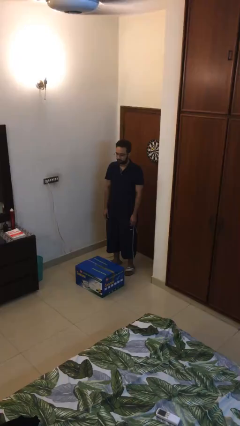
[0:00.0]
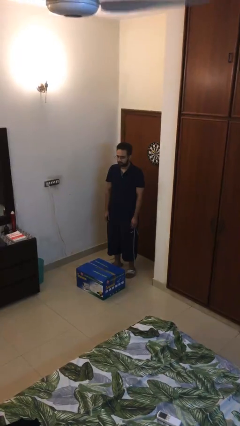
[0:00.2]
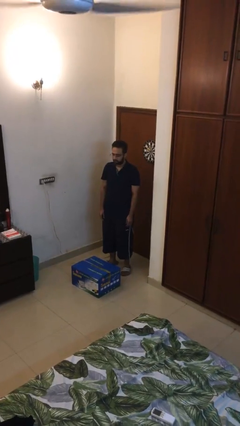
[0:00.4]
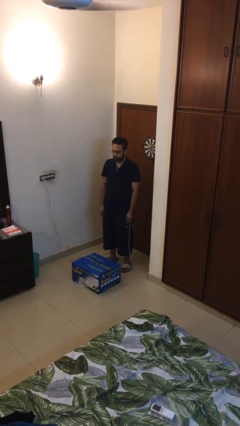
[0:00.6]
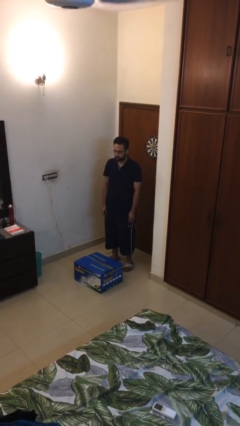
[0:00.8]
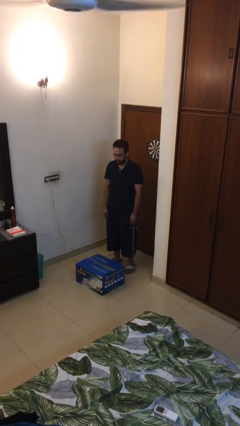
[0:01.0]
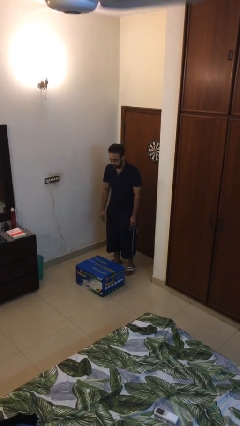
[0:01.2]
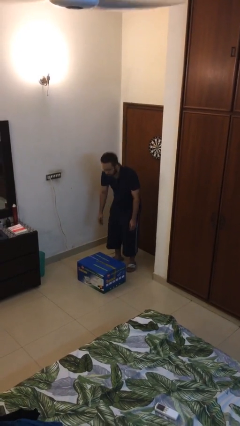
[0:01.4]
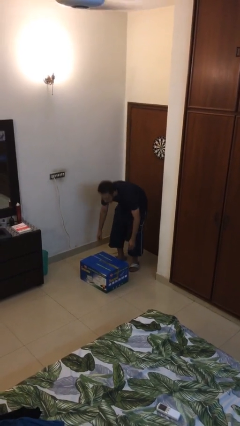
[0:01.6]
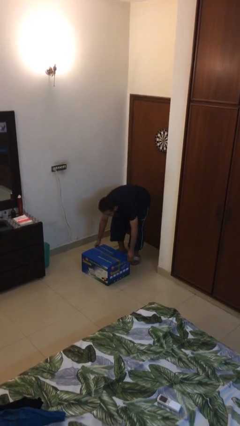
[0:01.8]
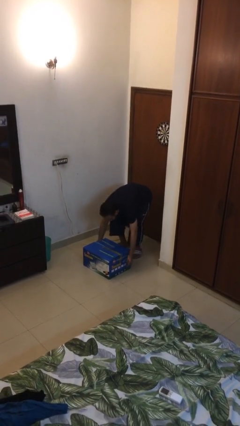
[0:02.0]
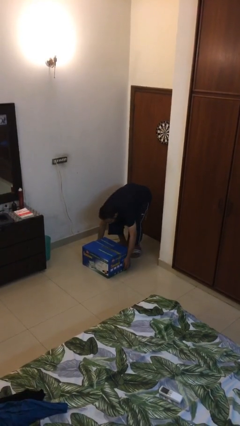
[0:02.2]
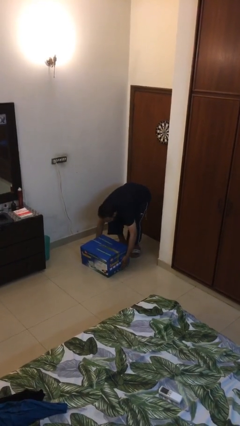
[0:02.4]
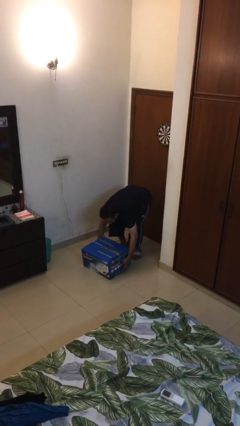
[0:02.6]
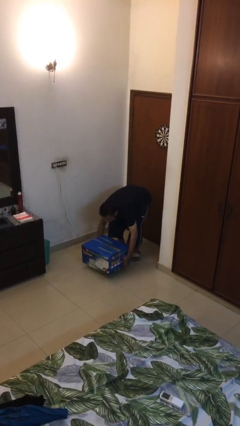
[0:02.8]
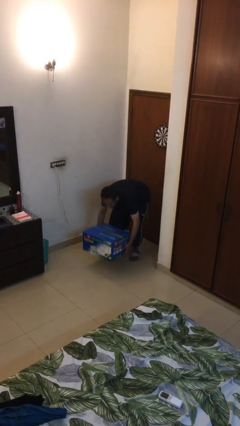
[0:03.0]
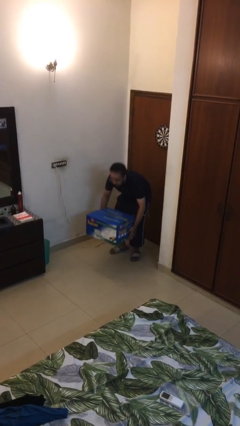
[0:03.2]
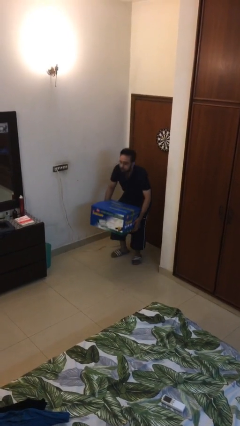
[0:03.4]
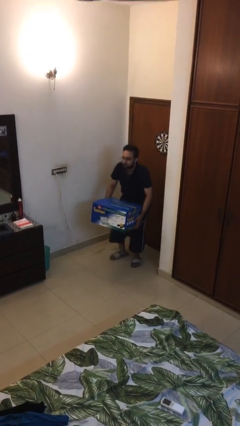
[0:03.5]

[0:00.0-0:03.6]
person picks up object from floor

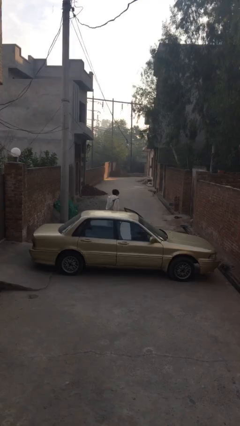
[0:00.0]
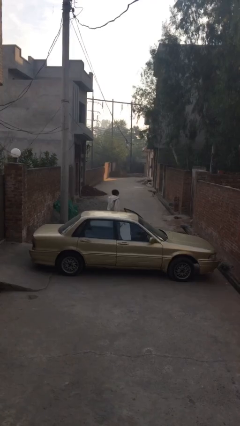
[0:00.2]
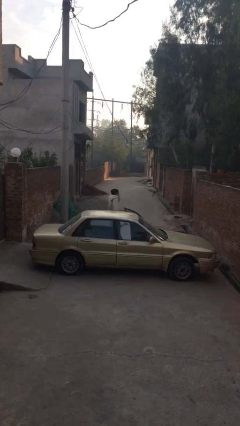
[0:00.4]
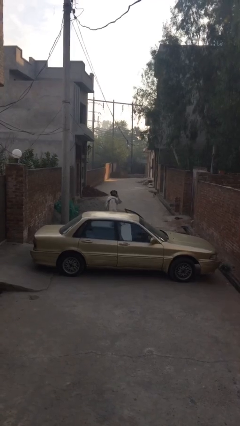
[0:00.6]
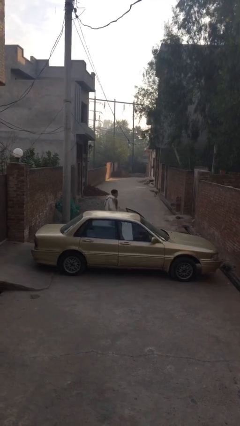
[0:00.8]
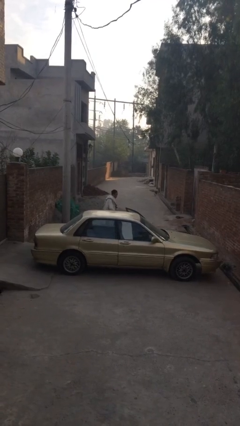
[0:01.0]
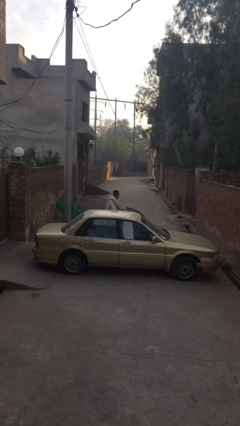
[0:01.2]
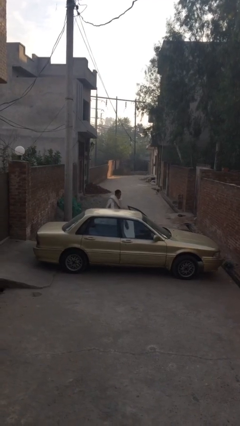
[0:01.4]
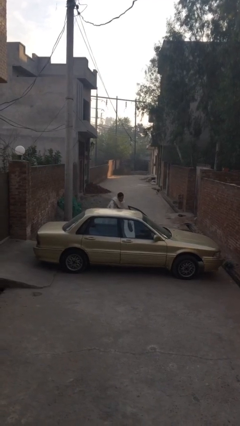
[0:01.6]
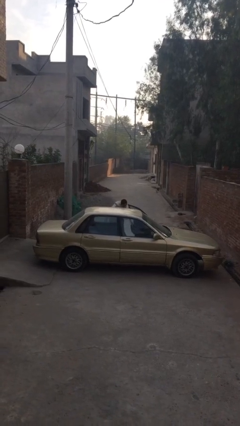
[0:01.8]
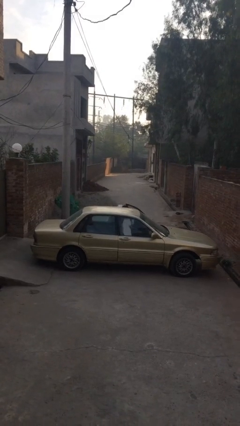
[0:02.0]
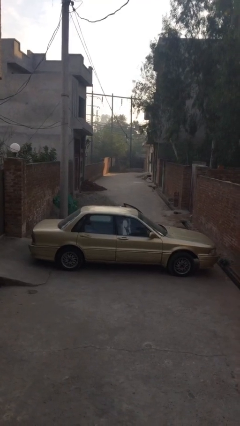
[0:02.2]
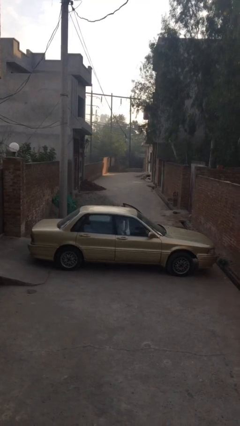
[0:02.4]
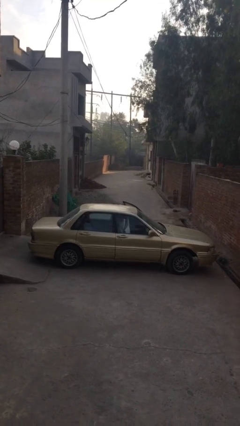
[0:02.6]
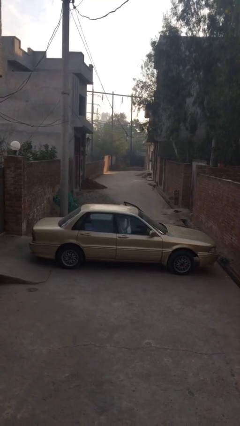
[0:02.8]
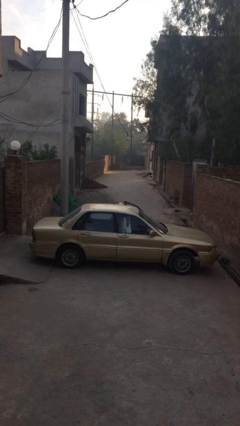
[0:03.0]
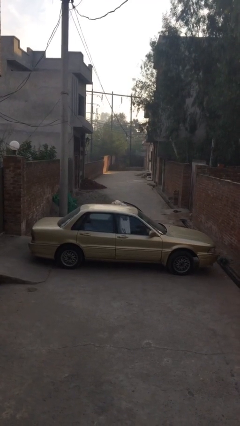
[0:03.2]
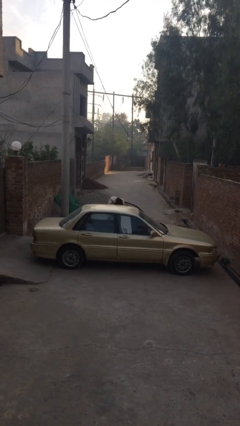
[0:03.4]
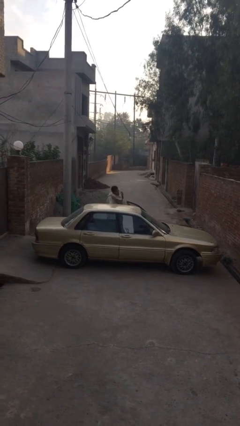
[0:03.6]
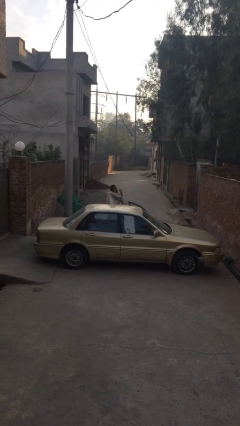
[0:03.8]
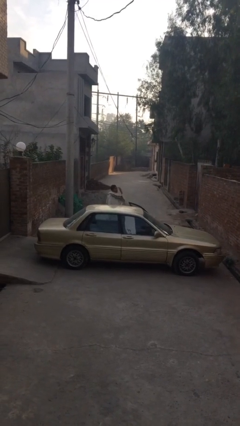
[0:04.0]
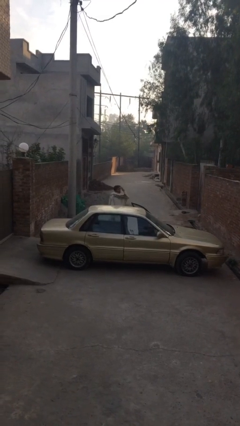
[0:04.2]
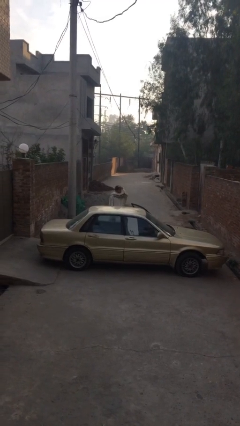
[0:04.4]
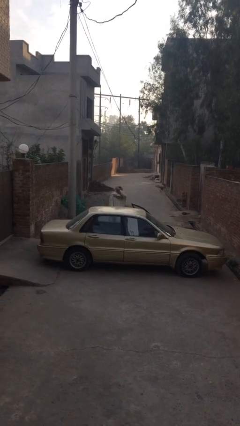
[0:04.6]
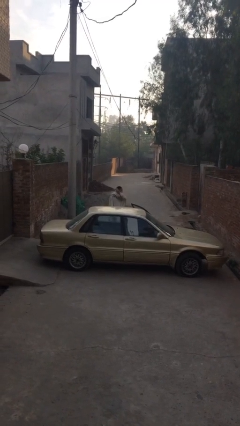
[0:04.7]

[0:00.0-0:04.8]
person loads car

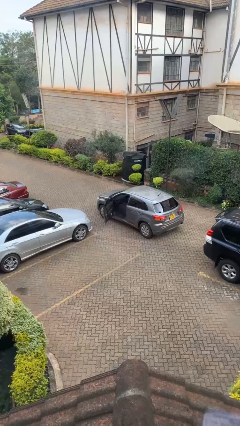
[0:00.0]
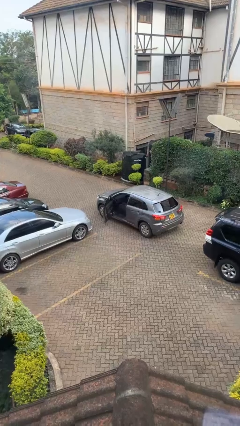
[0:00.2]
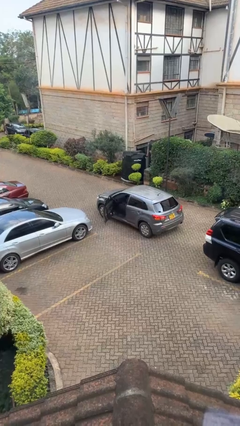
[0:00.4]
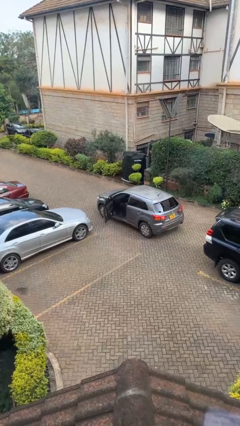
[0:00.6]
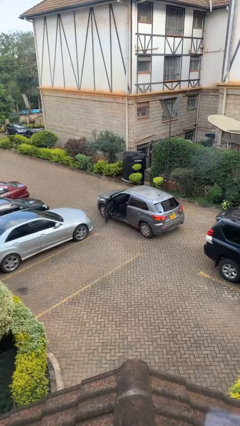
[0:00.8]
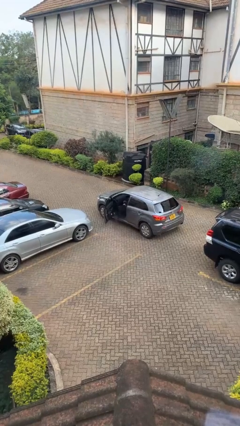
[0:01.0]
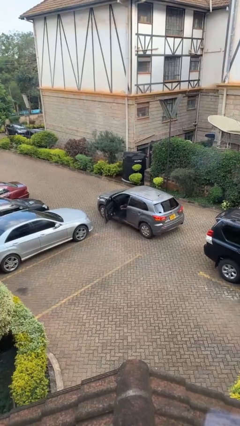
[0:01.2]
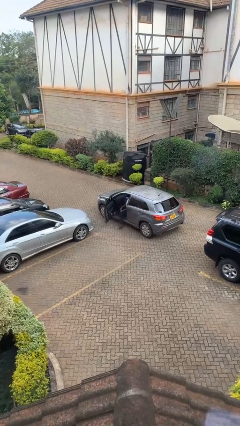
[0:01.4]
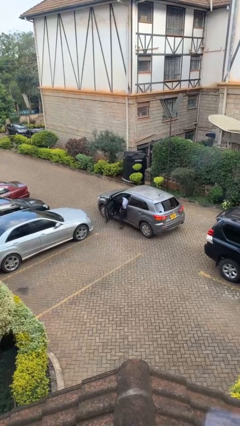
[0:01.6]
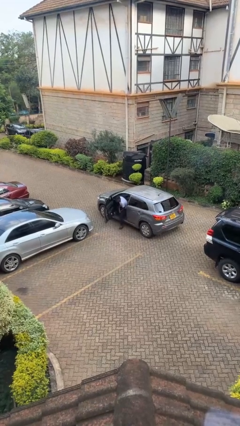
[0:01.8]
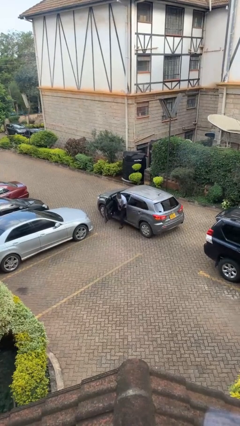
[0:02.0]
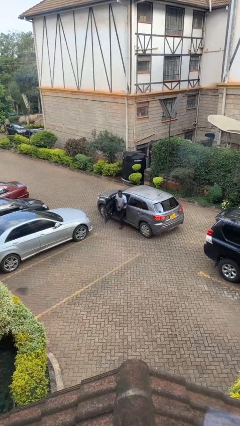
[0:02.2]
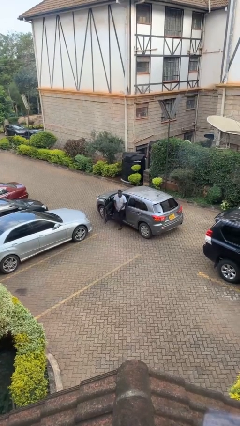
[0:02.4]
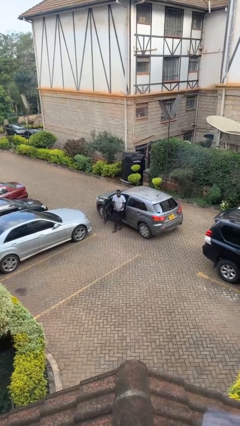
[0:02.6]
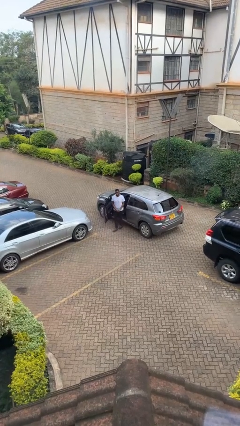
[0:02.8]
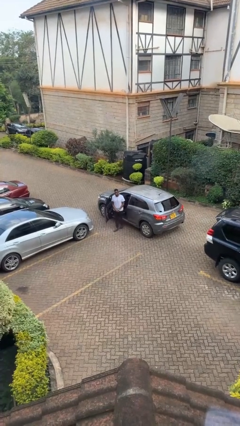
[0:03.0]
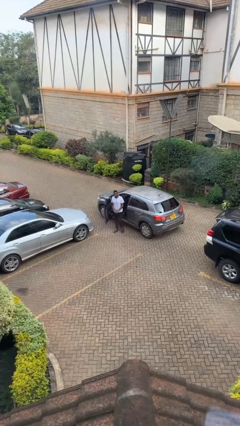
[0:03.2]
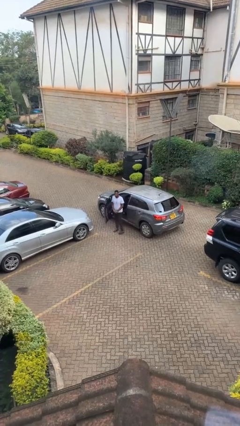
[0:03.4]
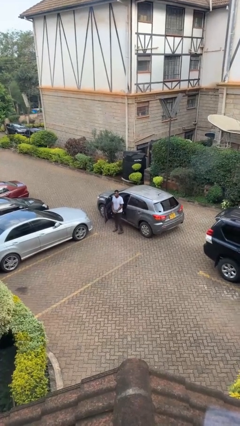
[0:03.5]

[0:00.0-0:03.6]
person exits car

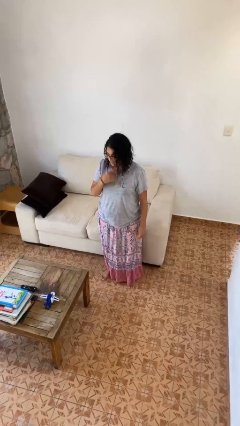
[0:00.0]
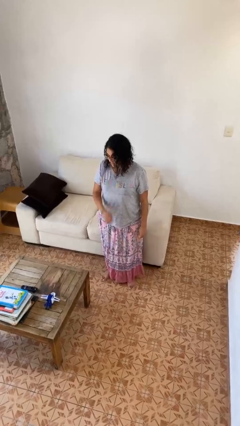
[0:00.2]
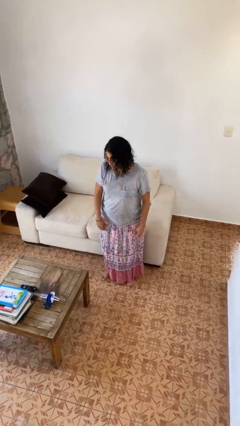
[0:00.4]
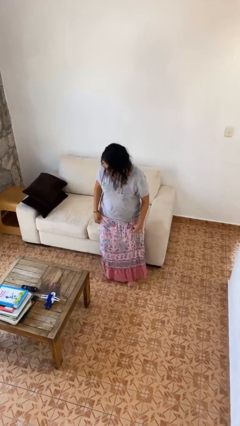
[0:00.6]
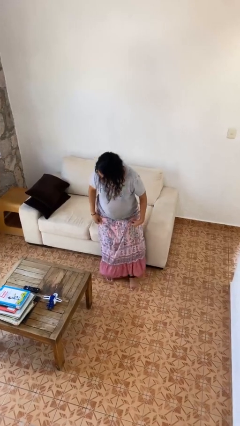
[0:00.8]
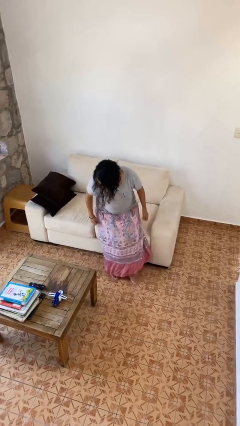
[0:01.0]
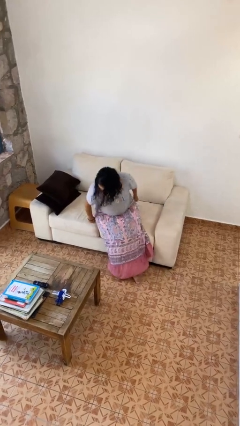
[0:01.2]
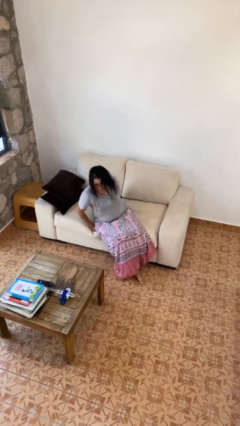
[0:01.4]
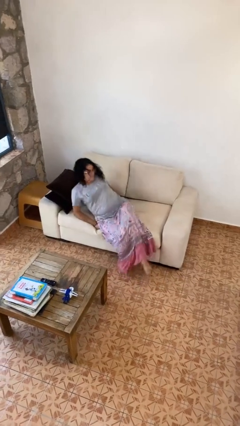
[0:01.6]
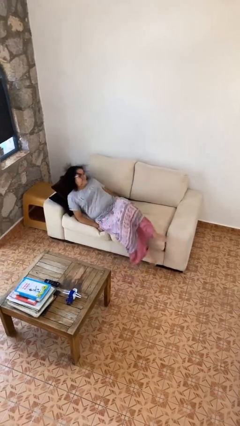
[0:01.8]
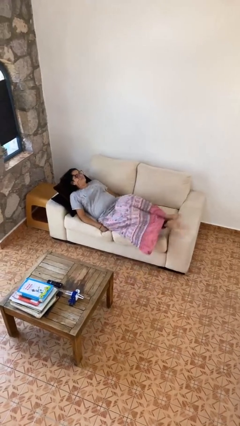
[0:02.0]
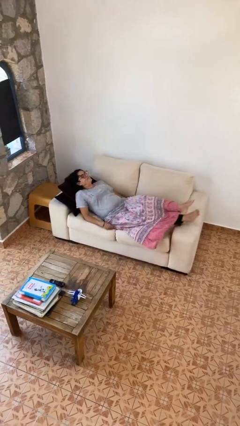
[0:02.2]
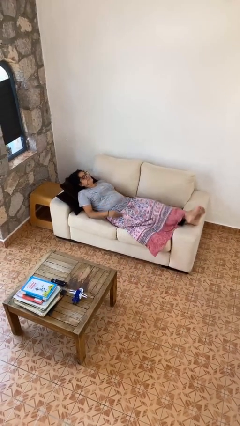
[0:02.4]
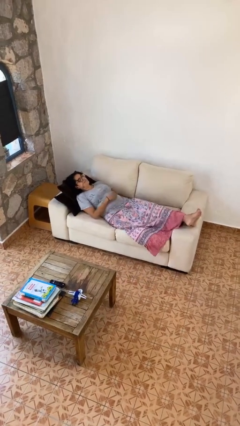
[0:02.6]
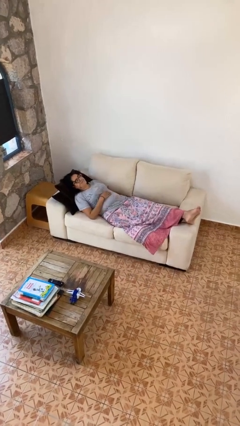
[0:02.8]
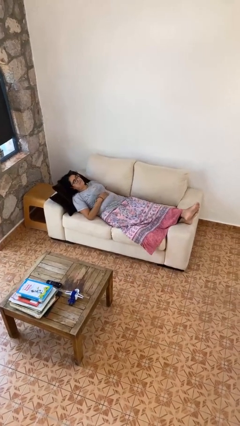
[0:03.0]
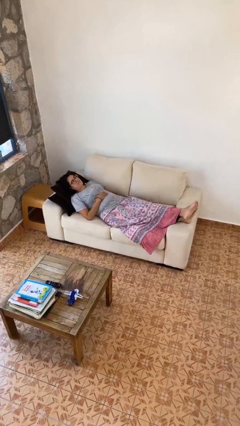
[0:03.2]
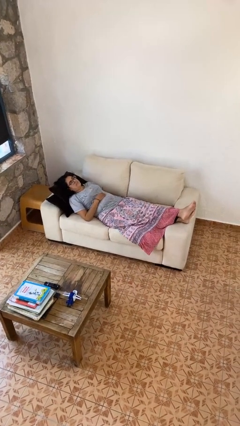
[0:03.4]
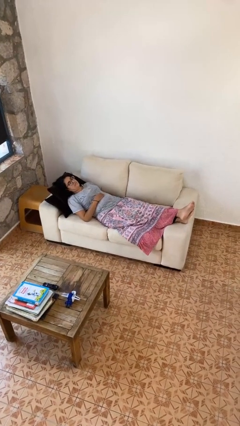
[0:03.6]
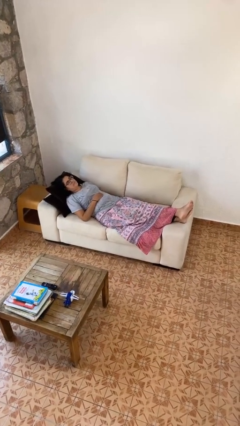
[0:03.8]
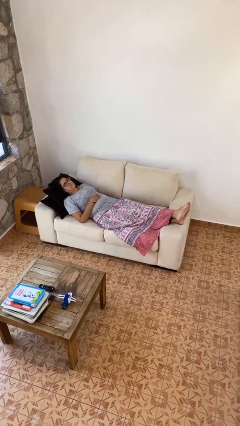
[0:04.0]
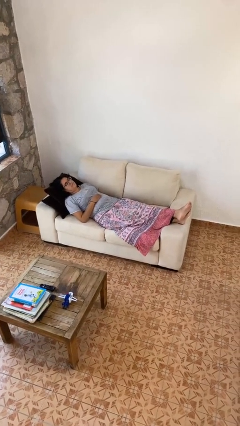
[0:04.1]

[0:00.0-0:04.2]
person lies down on couch

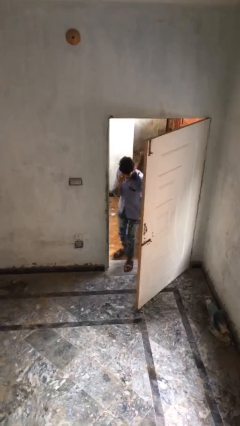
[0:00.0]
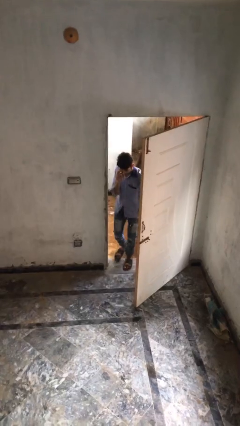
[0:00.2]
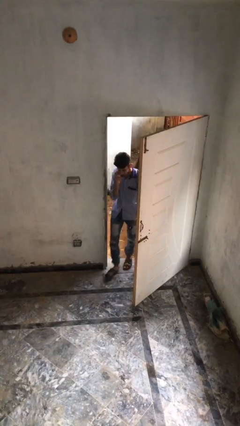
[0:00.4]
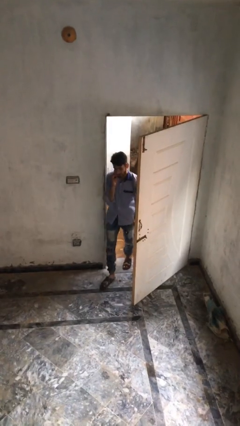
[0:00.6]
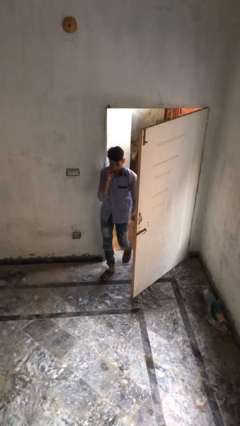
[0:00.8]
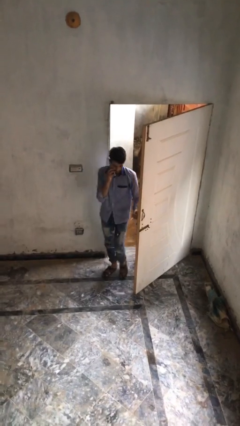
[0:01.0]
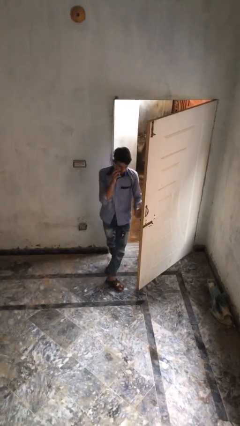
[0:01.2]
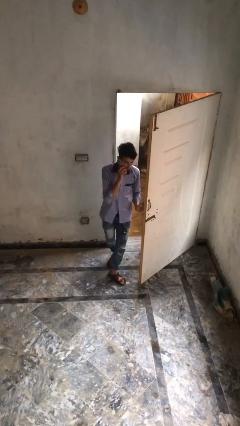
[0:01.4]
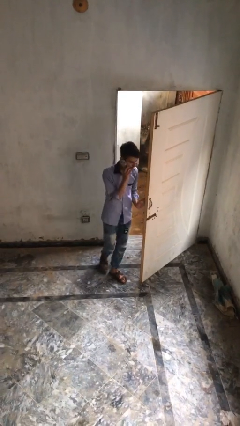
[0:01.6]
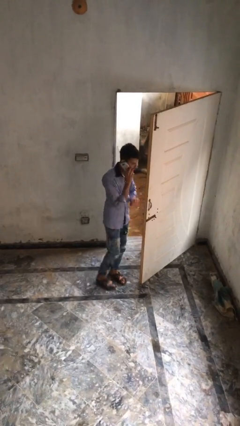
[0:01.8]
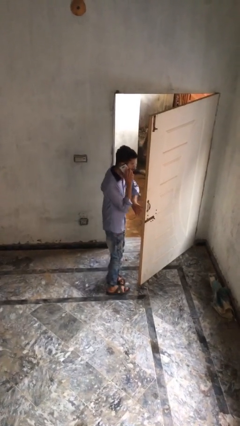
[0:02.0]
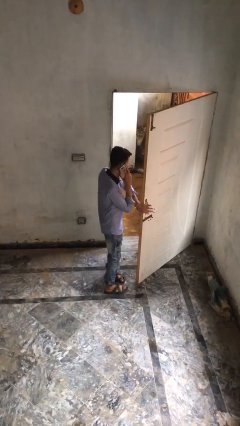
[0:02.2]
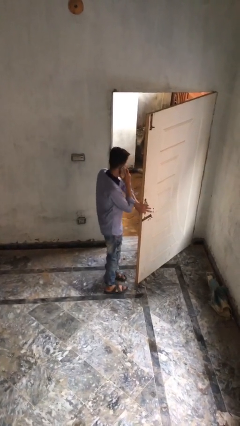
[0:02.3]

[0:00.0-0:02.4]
person enters scene through structure
